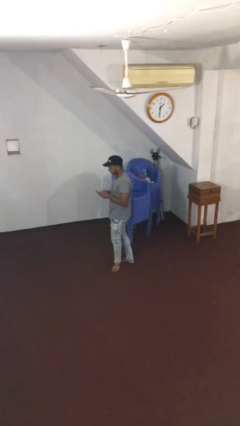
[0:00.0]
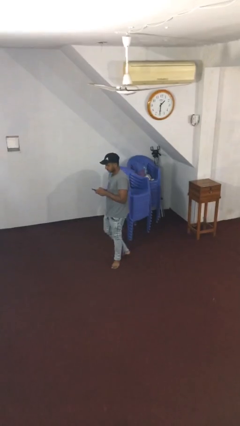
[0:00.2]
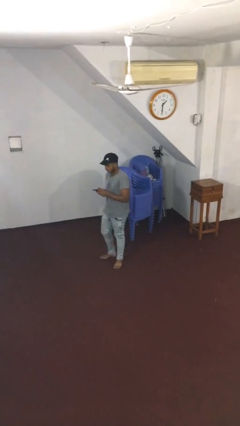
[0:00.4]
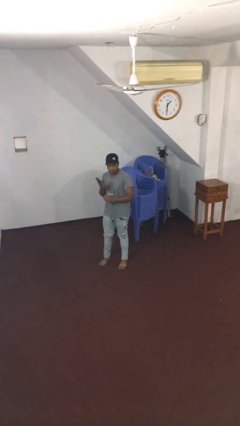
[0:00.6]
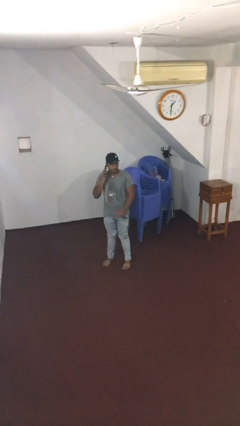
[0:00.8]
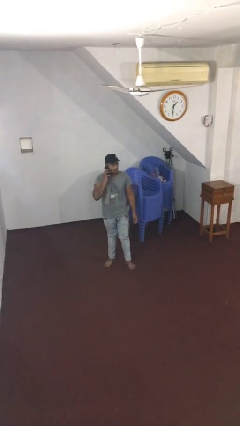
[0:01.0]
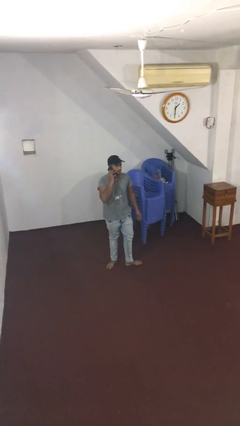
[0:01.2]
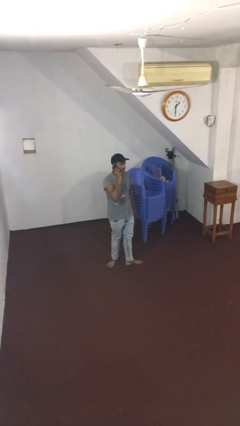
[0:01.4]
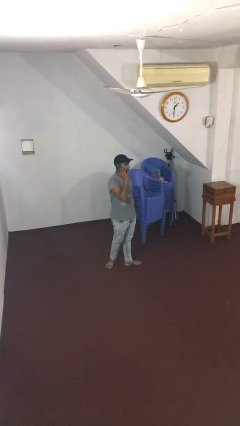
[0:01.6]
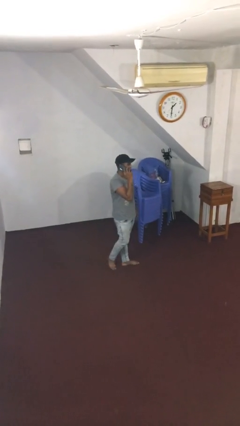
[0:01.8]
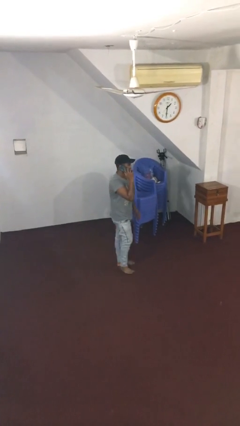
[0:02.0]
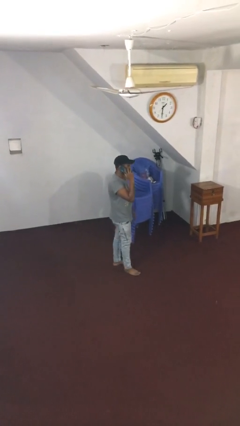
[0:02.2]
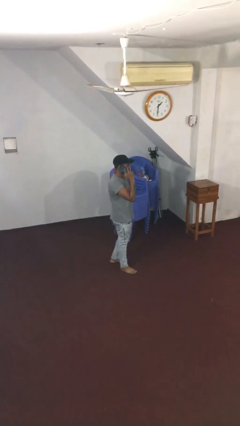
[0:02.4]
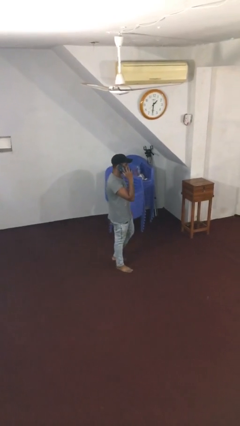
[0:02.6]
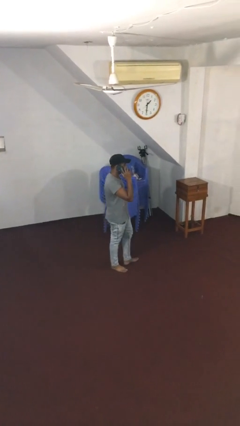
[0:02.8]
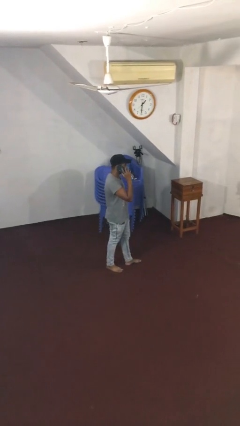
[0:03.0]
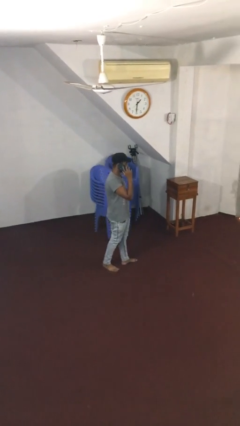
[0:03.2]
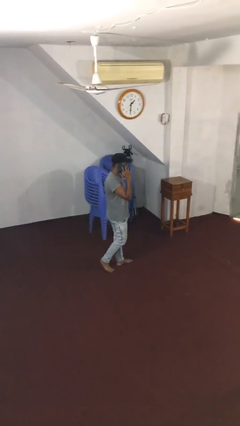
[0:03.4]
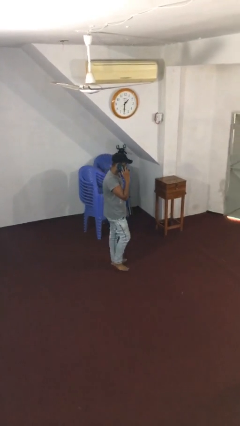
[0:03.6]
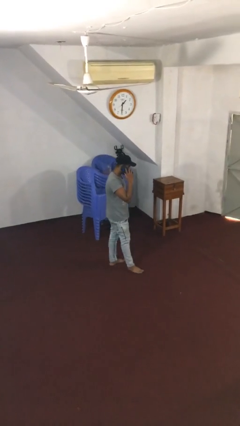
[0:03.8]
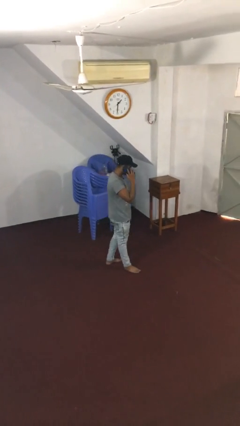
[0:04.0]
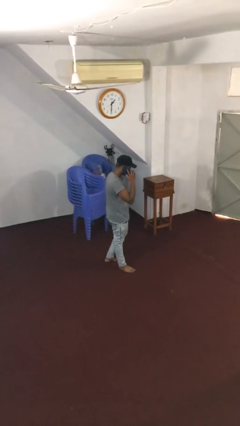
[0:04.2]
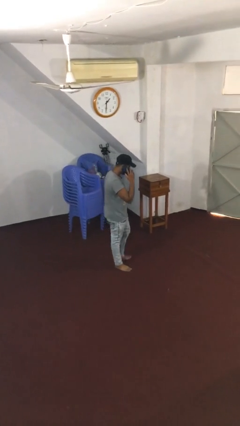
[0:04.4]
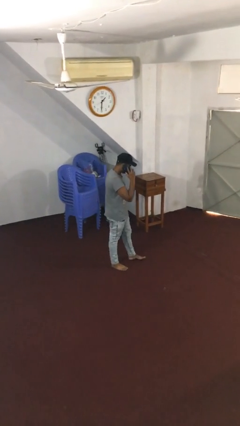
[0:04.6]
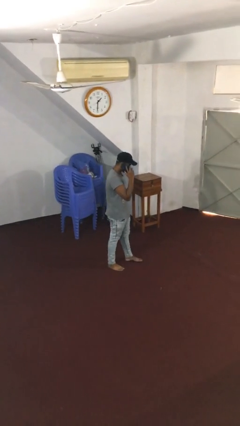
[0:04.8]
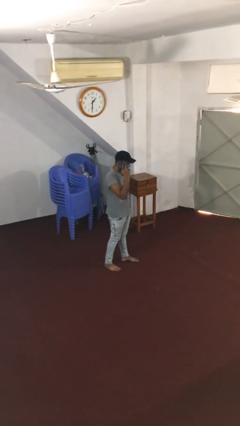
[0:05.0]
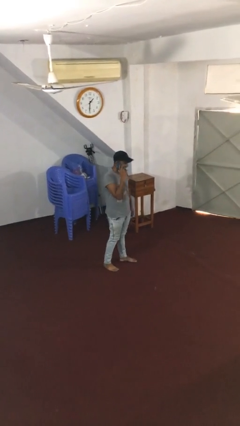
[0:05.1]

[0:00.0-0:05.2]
person talks on phone

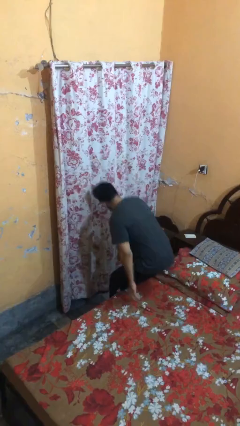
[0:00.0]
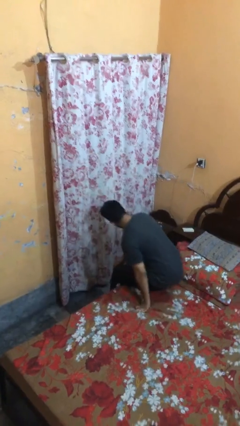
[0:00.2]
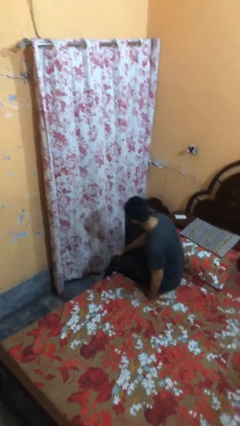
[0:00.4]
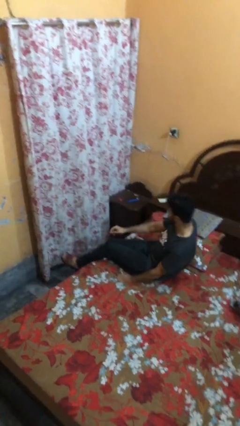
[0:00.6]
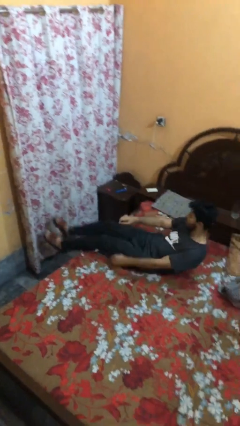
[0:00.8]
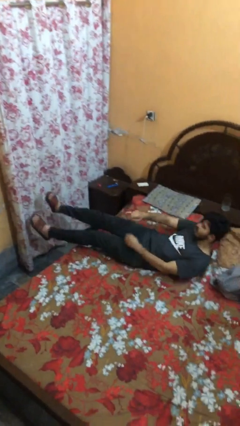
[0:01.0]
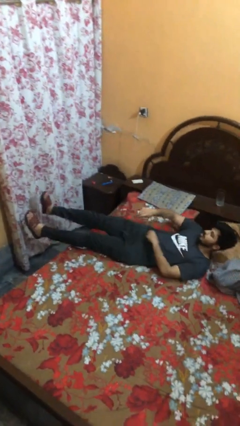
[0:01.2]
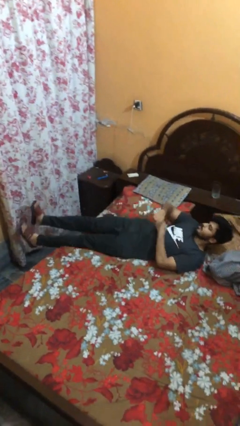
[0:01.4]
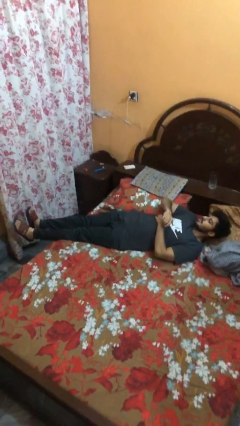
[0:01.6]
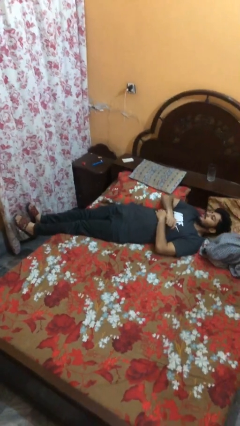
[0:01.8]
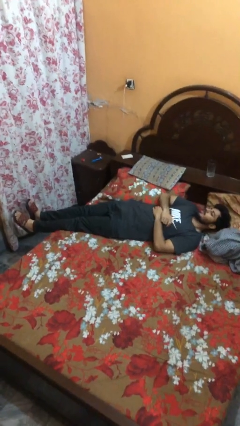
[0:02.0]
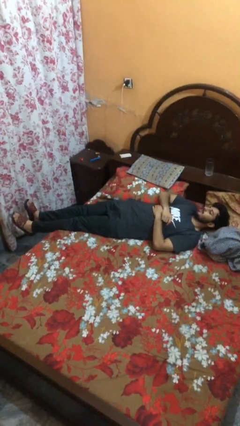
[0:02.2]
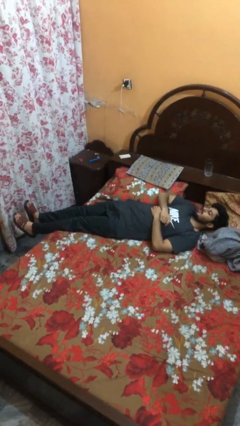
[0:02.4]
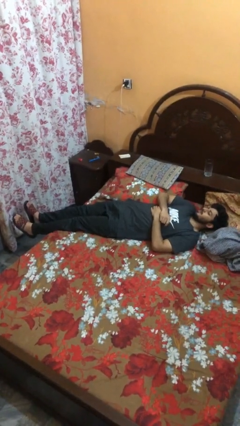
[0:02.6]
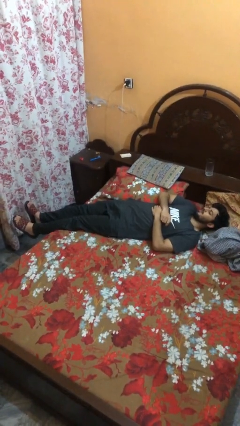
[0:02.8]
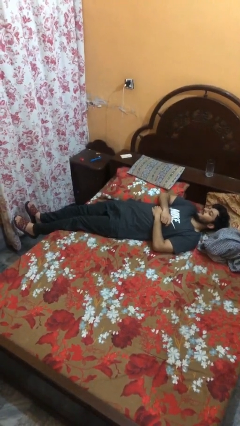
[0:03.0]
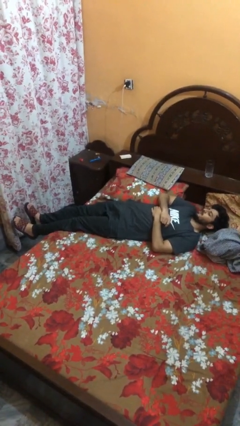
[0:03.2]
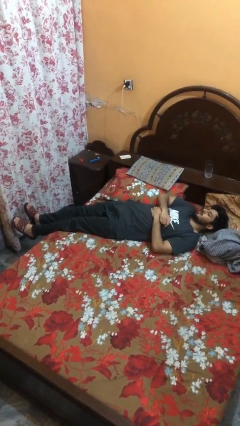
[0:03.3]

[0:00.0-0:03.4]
person lies down on bed

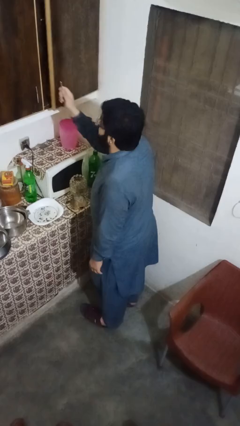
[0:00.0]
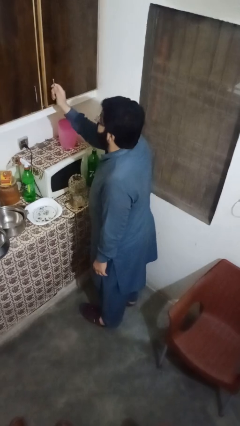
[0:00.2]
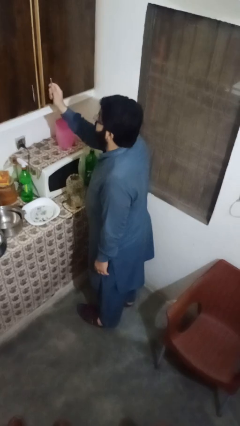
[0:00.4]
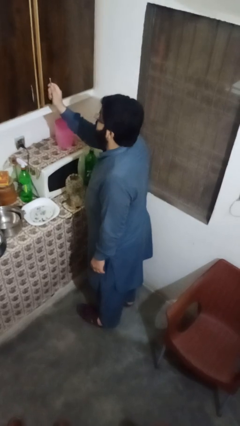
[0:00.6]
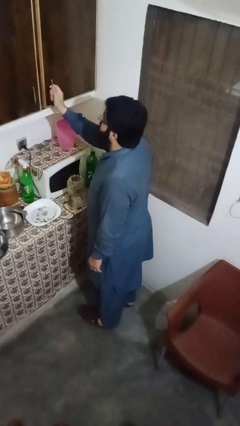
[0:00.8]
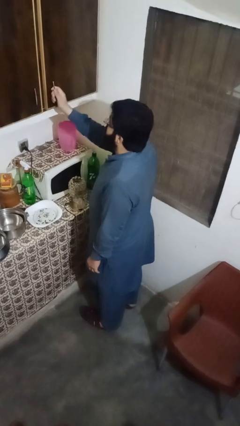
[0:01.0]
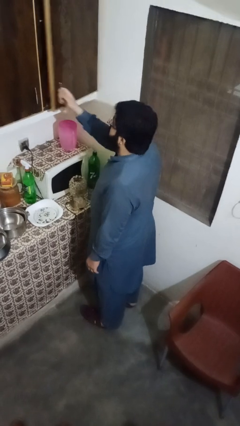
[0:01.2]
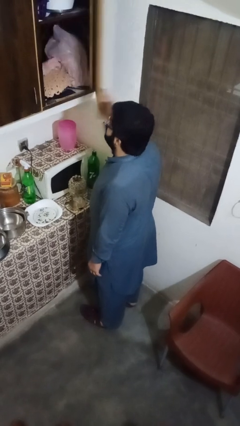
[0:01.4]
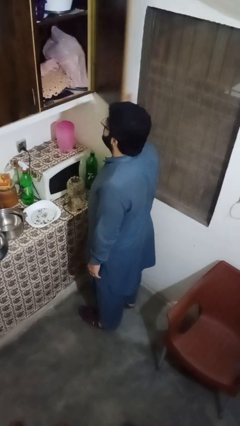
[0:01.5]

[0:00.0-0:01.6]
person closes cabinet

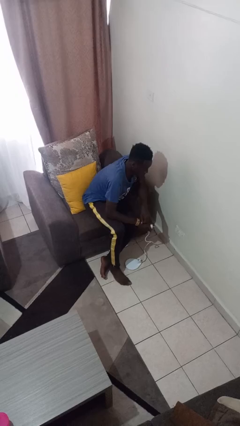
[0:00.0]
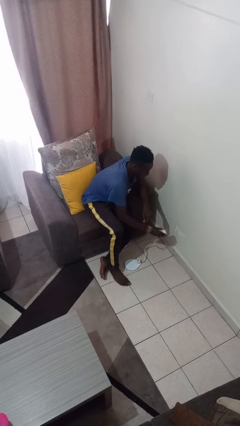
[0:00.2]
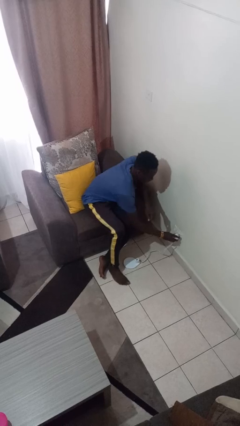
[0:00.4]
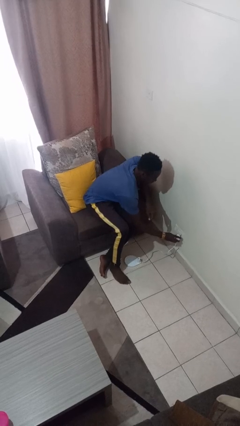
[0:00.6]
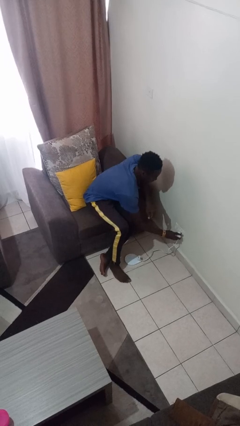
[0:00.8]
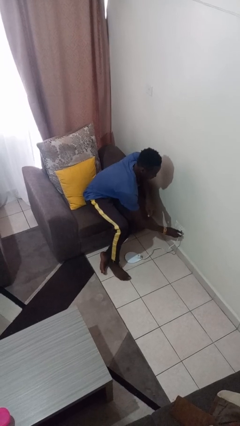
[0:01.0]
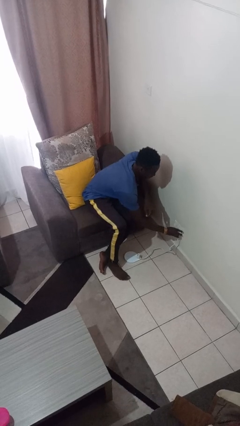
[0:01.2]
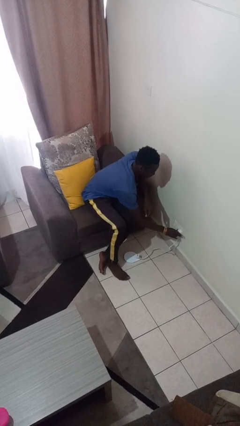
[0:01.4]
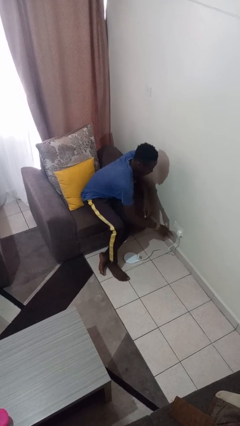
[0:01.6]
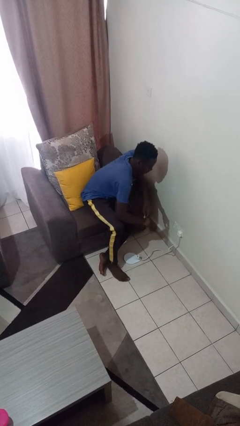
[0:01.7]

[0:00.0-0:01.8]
person plugs into electrical socket

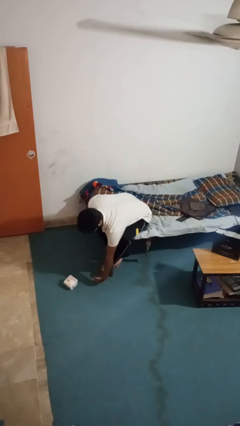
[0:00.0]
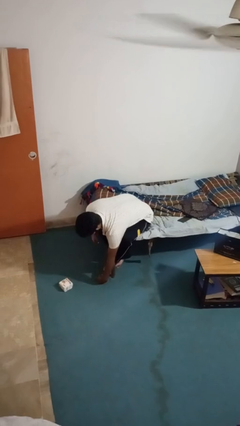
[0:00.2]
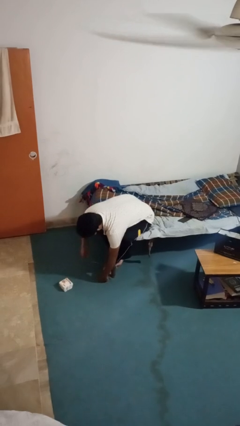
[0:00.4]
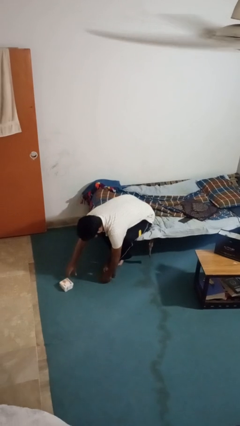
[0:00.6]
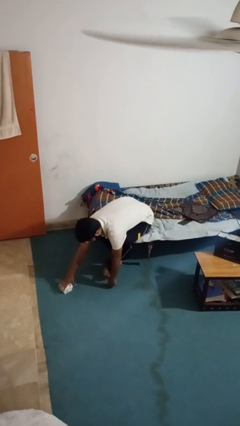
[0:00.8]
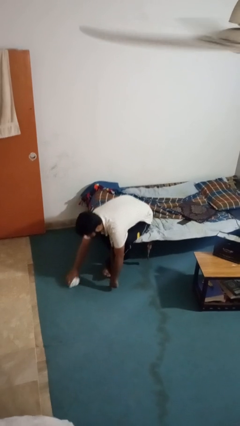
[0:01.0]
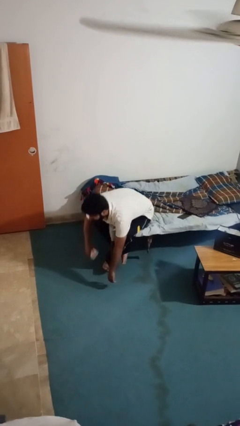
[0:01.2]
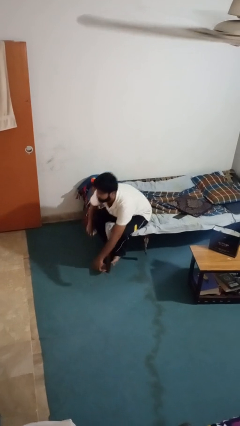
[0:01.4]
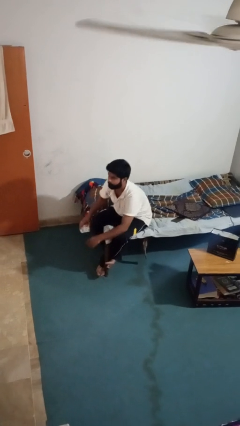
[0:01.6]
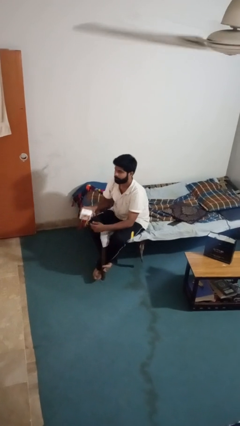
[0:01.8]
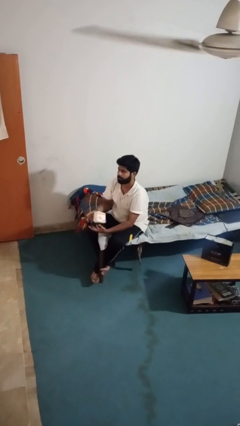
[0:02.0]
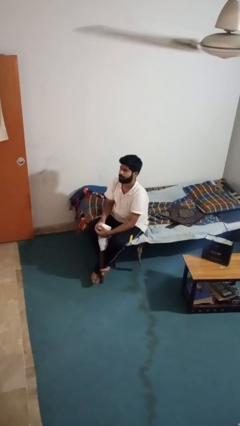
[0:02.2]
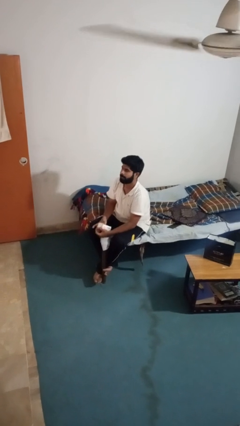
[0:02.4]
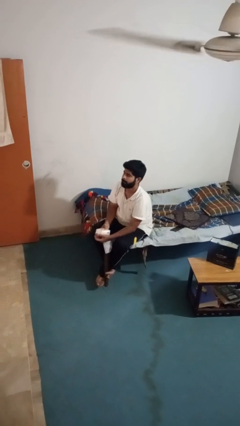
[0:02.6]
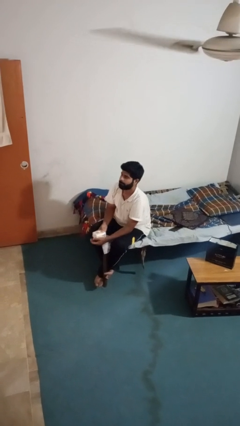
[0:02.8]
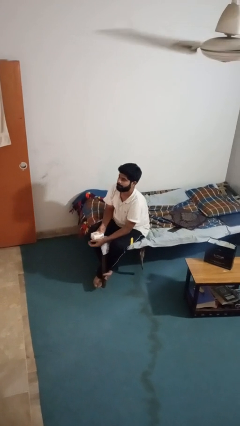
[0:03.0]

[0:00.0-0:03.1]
person picks up object from floor

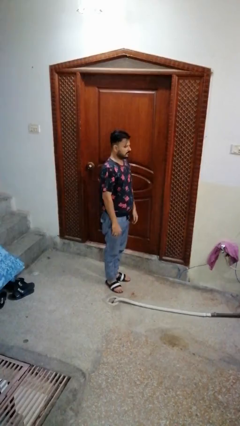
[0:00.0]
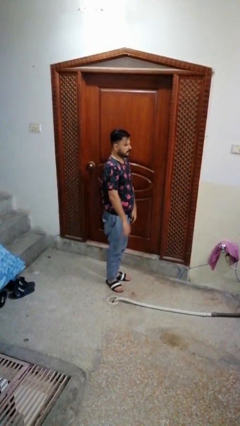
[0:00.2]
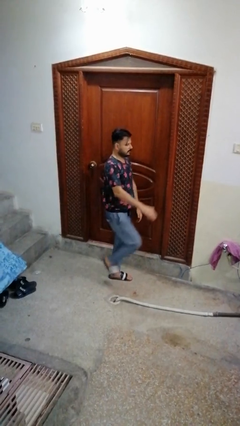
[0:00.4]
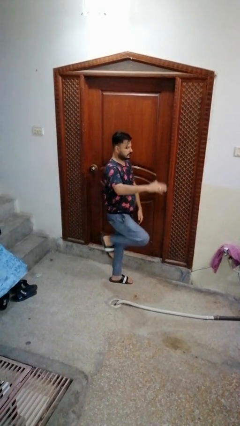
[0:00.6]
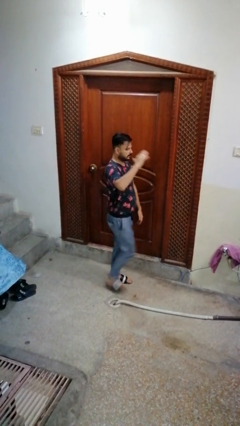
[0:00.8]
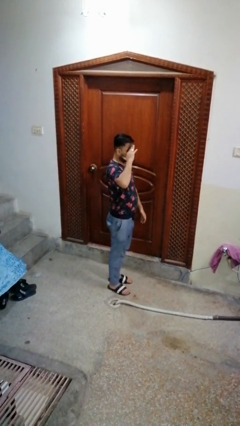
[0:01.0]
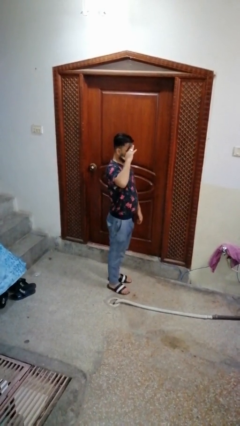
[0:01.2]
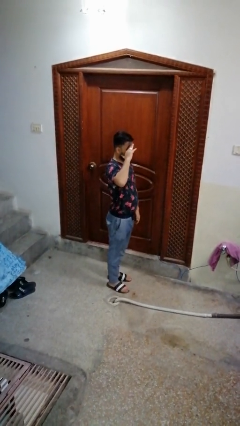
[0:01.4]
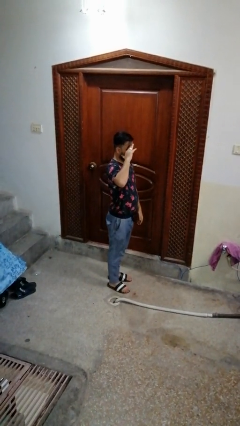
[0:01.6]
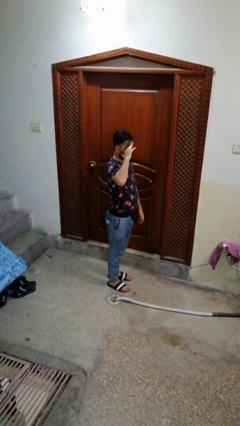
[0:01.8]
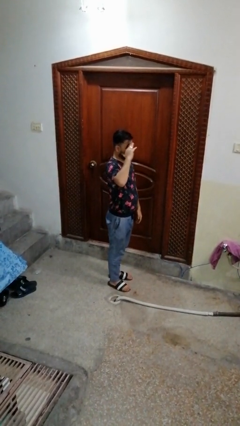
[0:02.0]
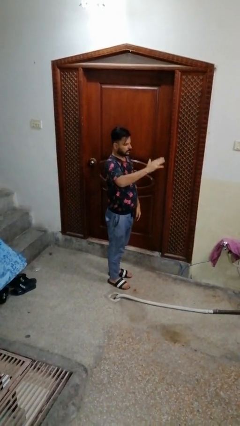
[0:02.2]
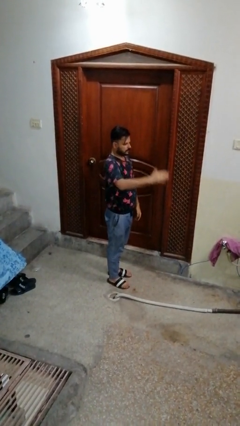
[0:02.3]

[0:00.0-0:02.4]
person salutes
